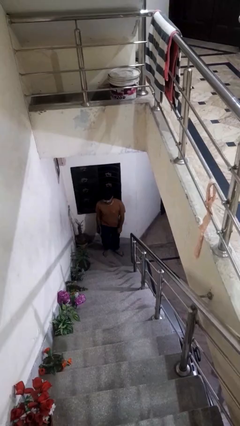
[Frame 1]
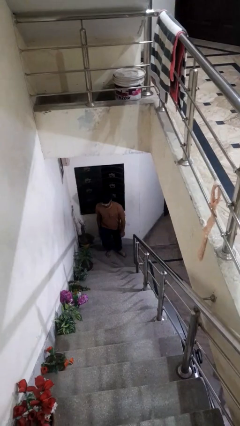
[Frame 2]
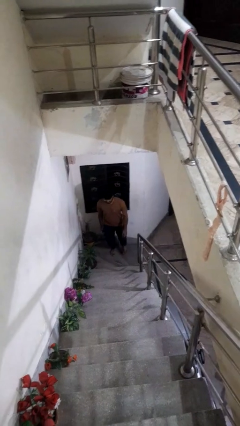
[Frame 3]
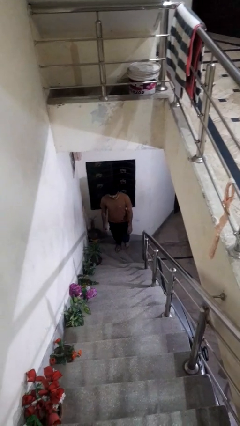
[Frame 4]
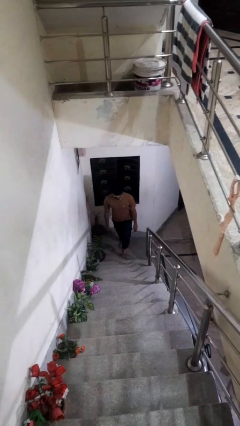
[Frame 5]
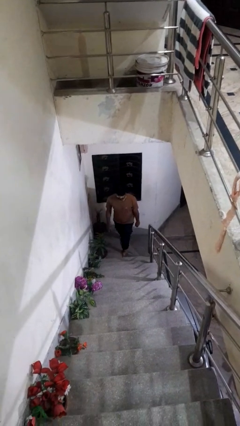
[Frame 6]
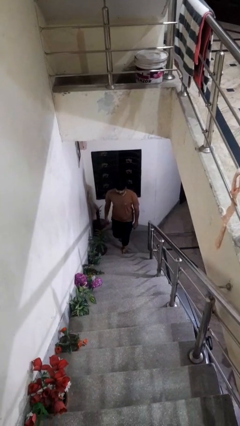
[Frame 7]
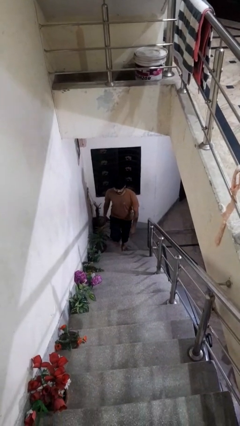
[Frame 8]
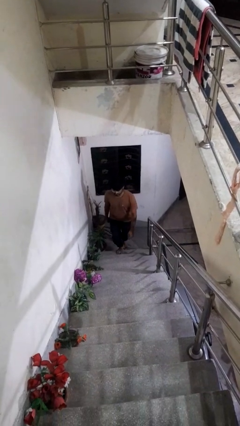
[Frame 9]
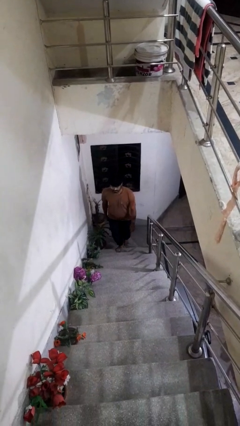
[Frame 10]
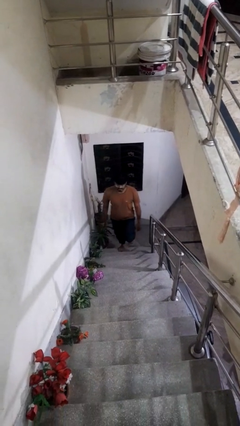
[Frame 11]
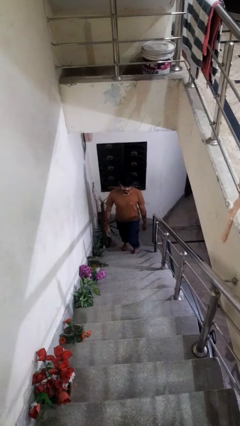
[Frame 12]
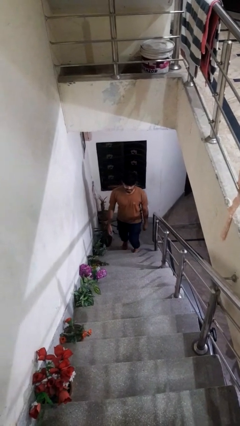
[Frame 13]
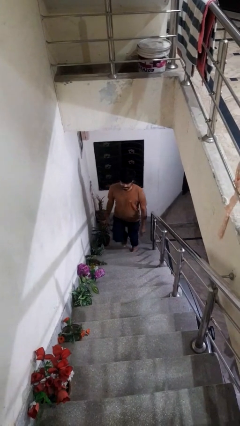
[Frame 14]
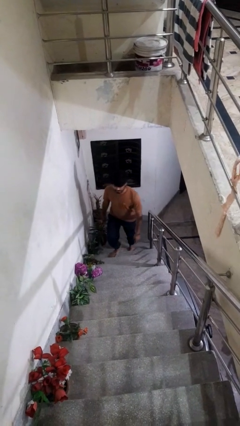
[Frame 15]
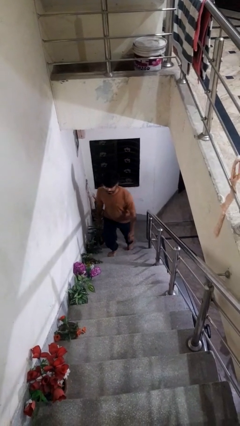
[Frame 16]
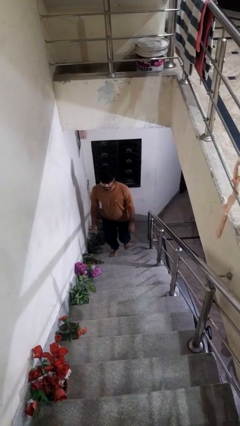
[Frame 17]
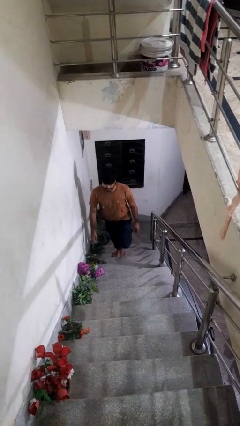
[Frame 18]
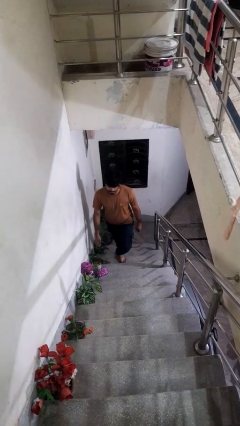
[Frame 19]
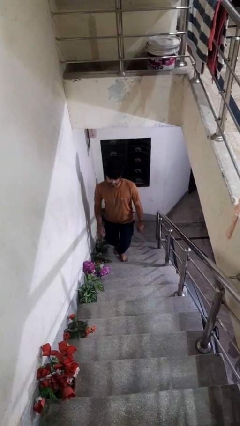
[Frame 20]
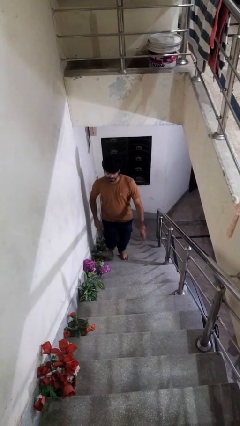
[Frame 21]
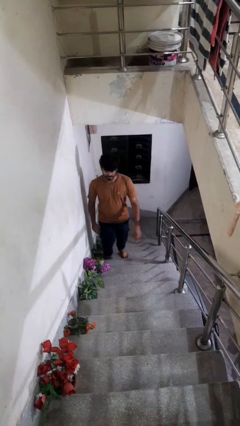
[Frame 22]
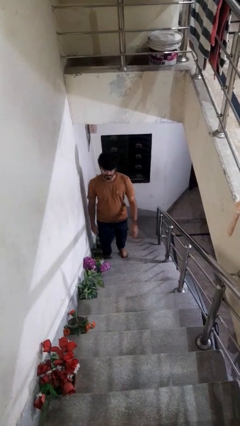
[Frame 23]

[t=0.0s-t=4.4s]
person climbs up stairs

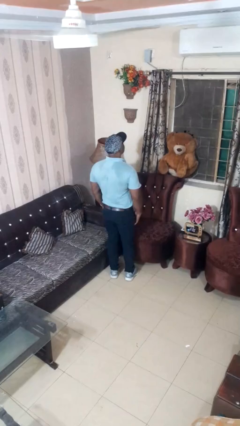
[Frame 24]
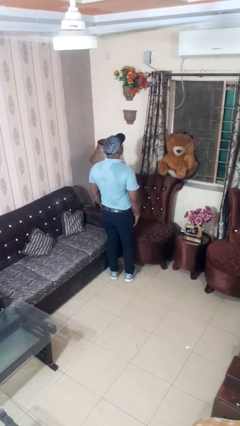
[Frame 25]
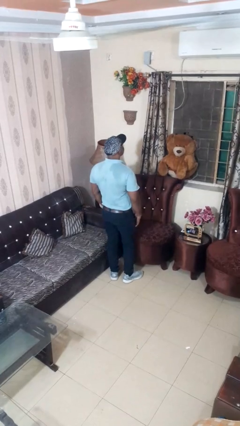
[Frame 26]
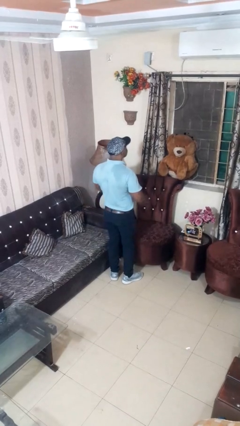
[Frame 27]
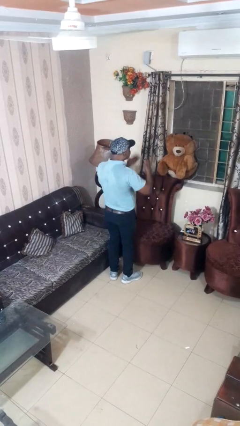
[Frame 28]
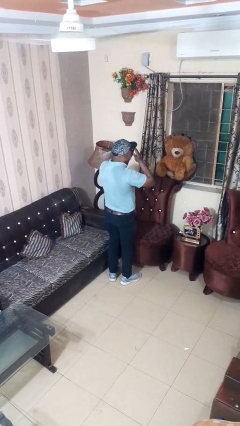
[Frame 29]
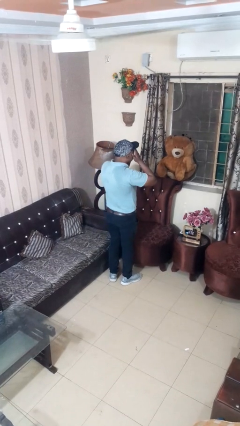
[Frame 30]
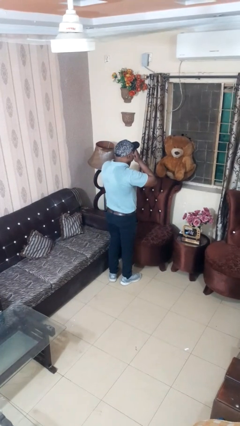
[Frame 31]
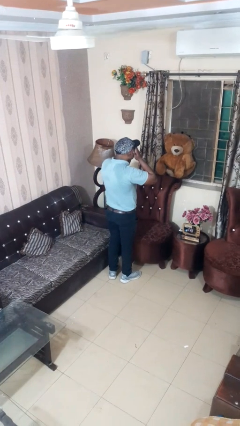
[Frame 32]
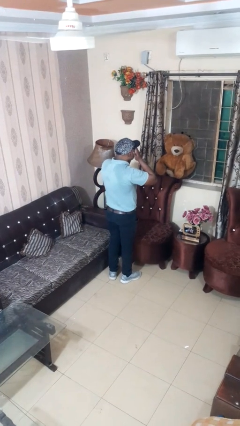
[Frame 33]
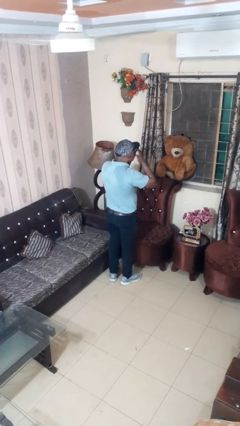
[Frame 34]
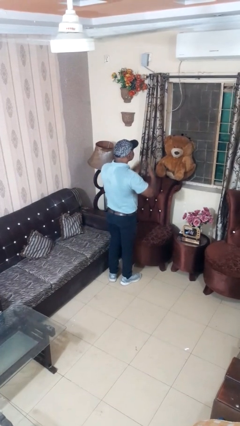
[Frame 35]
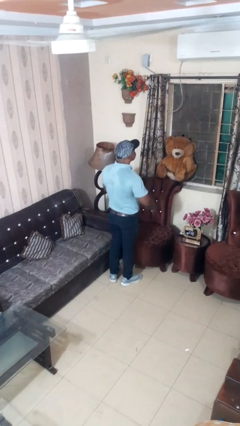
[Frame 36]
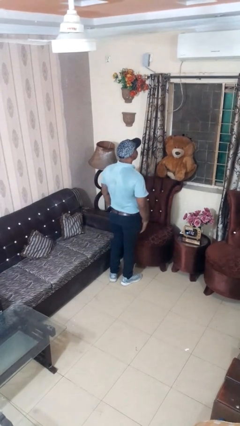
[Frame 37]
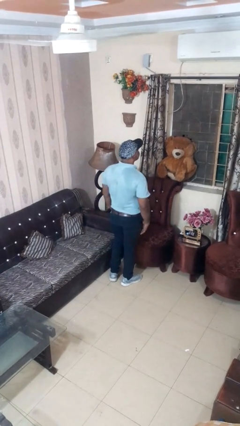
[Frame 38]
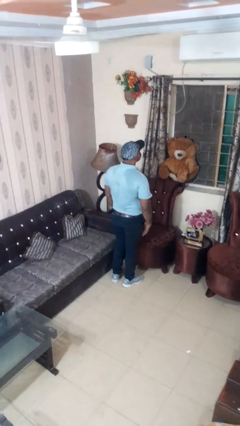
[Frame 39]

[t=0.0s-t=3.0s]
person covers face with hands

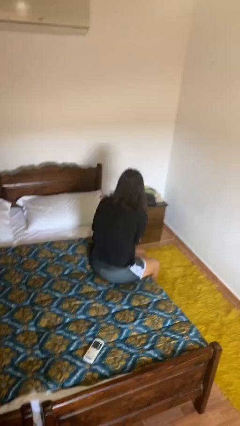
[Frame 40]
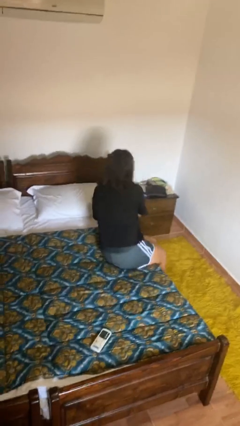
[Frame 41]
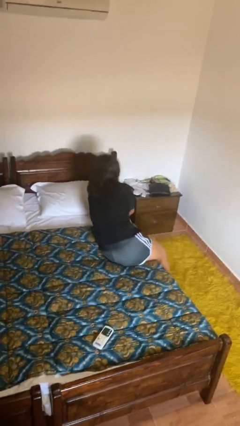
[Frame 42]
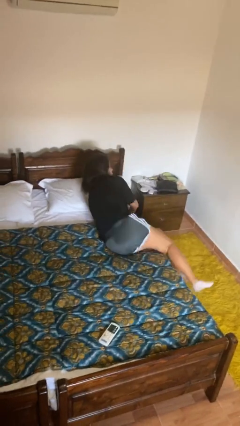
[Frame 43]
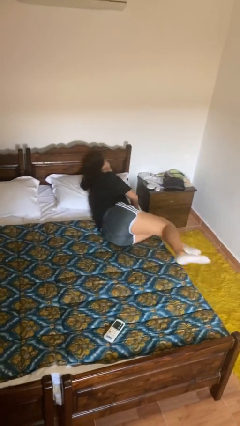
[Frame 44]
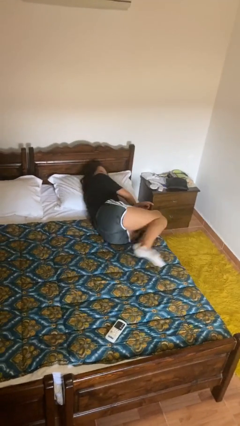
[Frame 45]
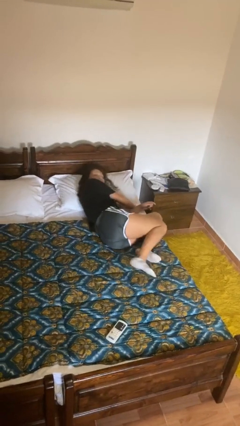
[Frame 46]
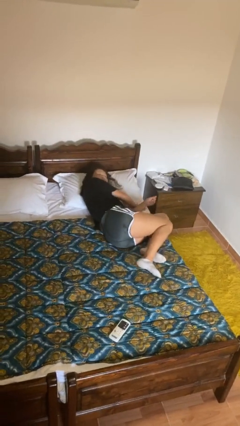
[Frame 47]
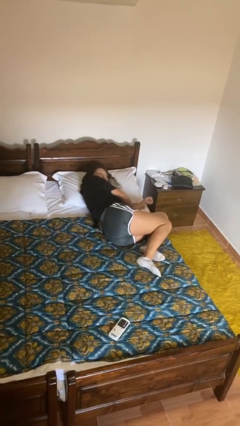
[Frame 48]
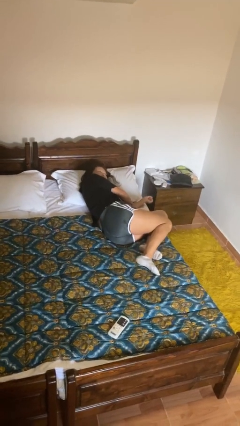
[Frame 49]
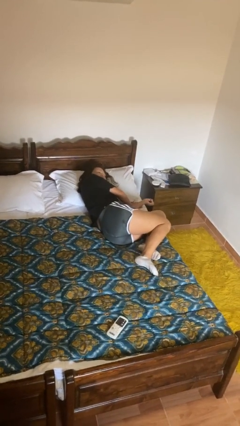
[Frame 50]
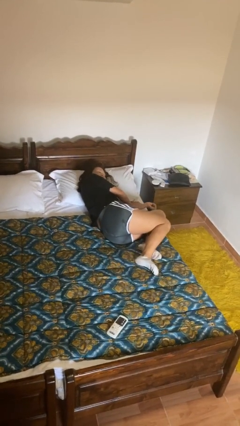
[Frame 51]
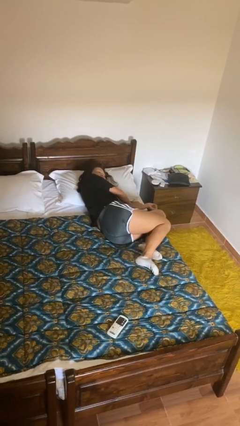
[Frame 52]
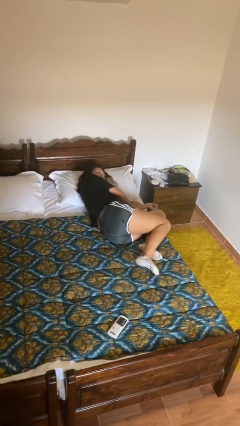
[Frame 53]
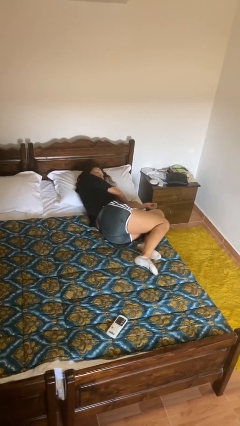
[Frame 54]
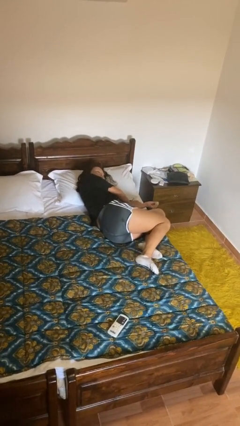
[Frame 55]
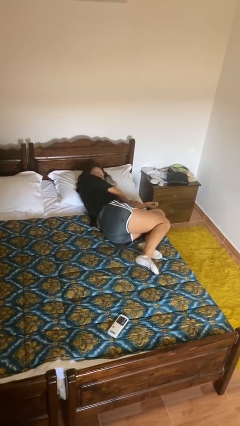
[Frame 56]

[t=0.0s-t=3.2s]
person lies down on bed

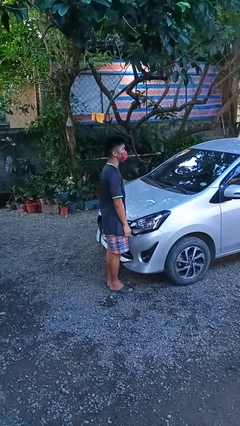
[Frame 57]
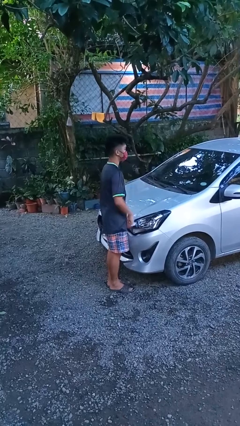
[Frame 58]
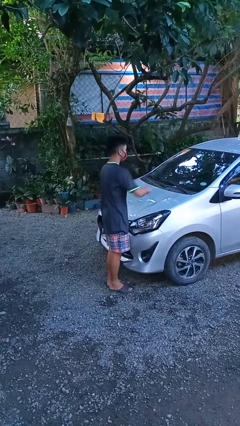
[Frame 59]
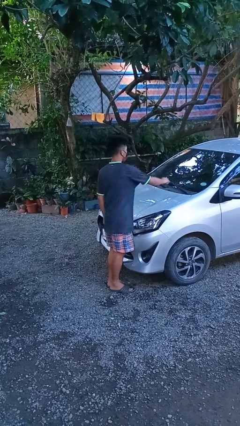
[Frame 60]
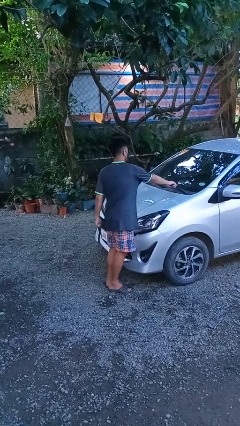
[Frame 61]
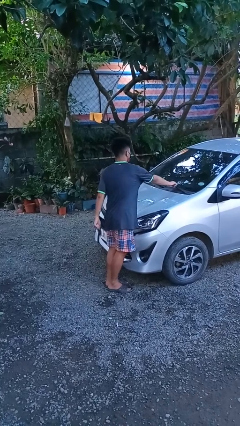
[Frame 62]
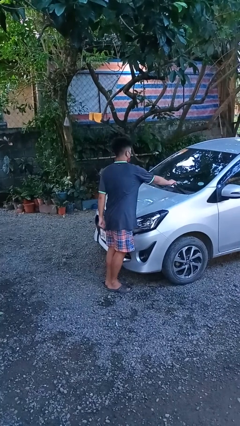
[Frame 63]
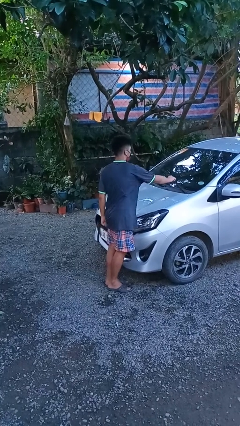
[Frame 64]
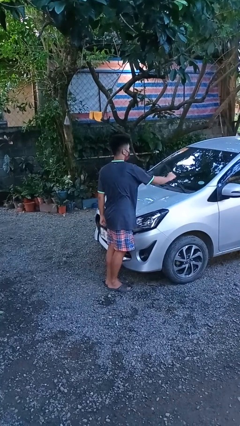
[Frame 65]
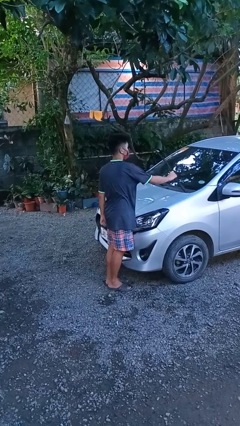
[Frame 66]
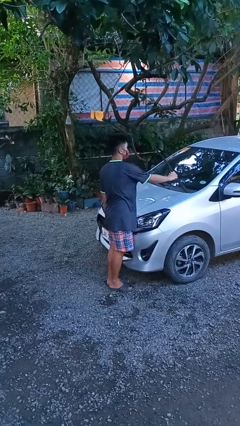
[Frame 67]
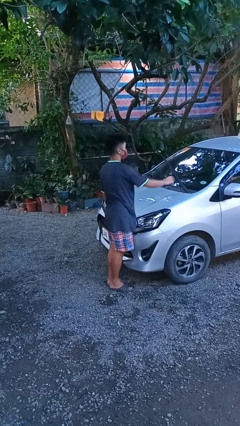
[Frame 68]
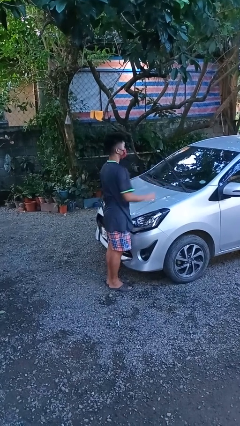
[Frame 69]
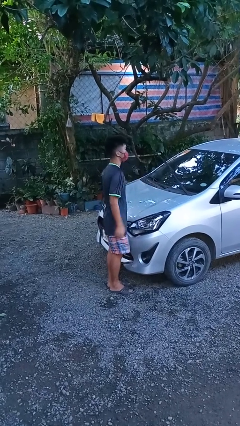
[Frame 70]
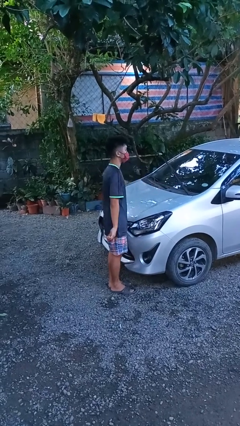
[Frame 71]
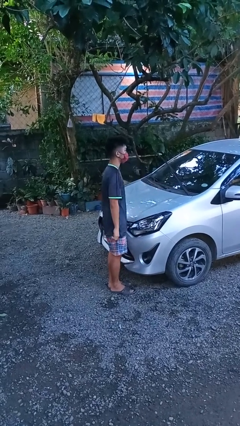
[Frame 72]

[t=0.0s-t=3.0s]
person flips up car wipers

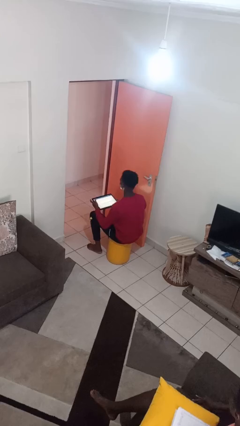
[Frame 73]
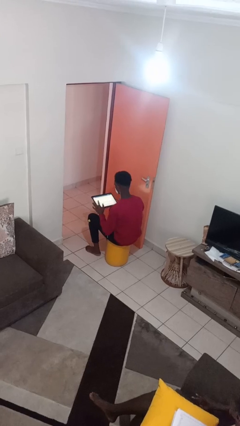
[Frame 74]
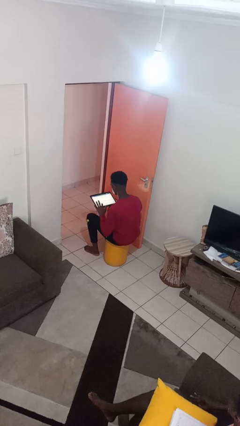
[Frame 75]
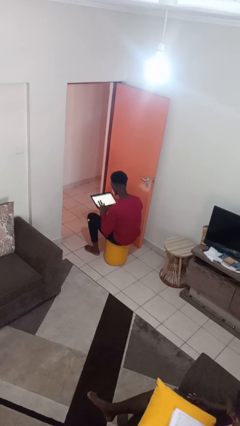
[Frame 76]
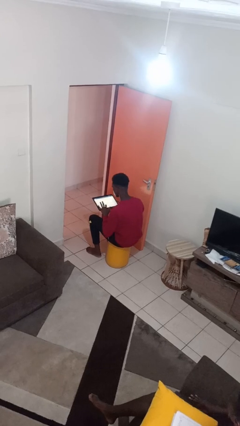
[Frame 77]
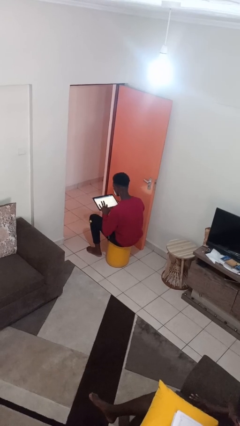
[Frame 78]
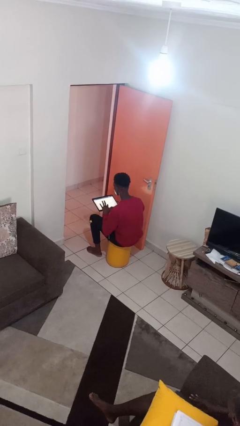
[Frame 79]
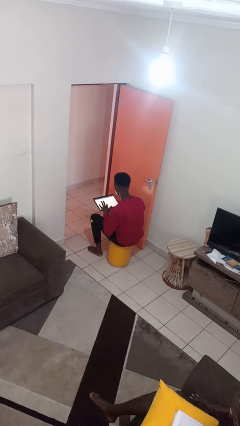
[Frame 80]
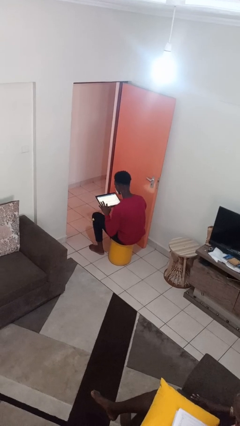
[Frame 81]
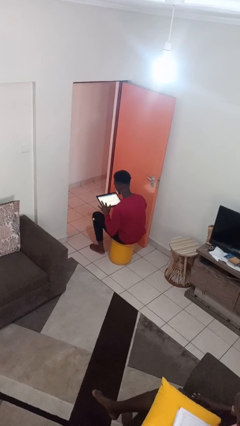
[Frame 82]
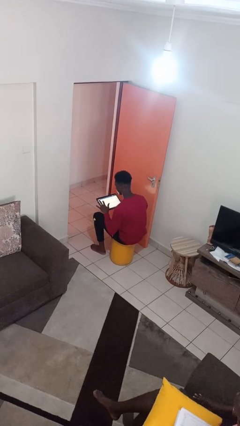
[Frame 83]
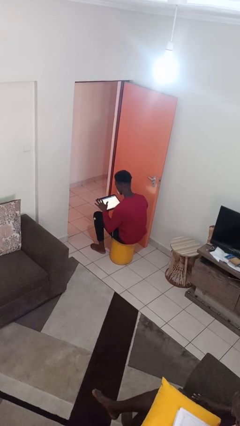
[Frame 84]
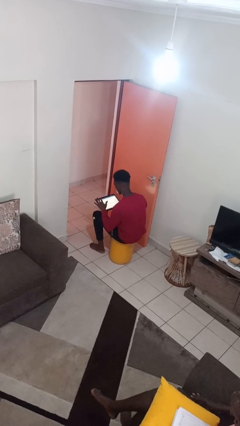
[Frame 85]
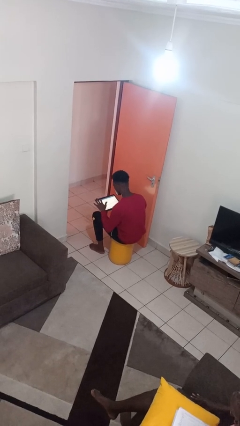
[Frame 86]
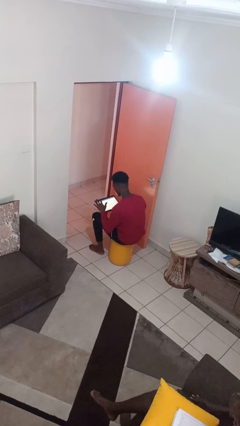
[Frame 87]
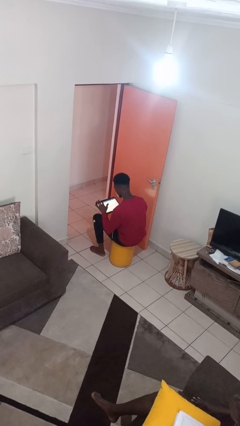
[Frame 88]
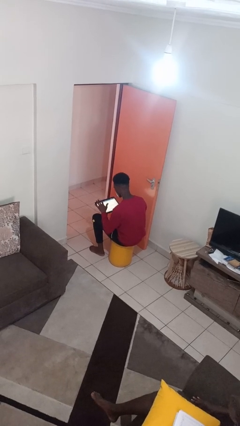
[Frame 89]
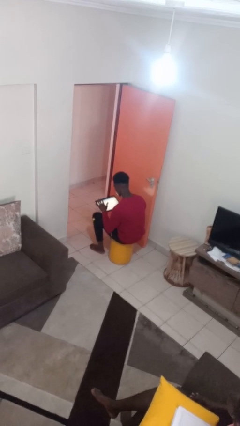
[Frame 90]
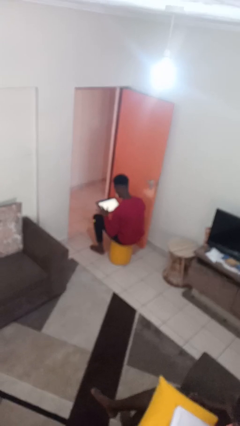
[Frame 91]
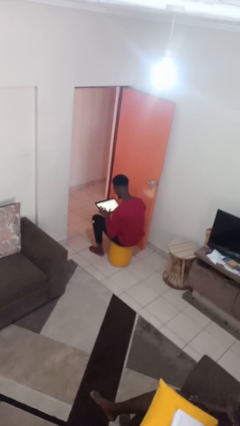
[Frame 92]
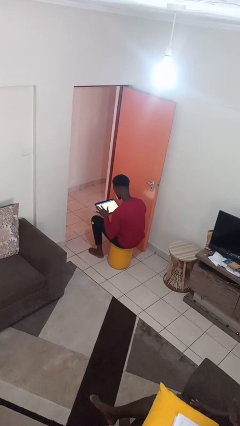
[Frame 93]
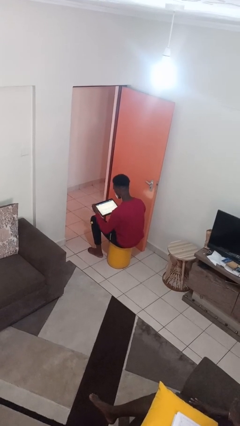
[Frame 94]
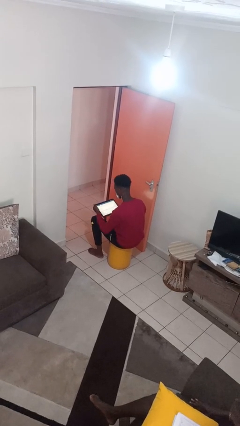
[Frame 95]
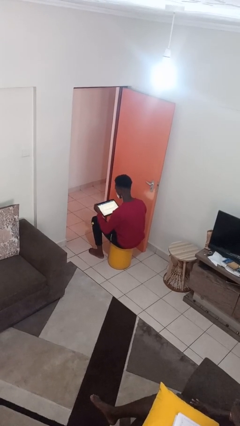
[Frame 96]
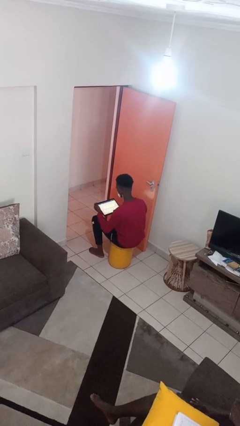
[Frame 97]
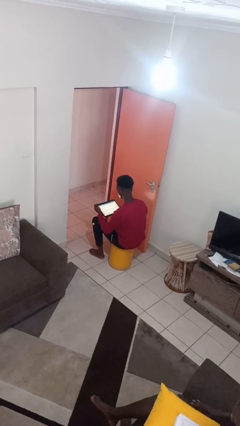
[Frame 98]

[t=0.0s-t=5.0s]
person interacts with tablet
